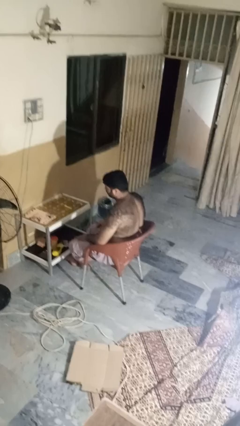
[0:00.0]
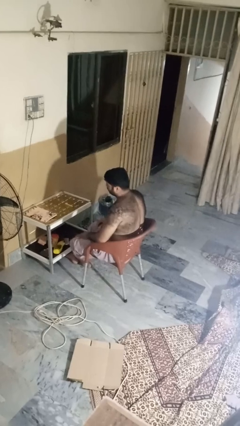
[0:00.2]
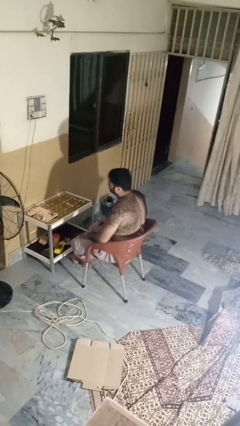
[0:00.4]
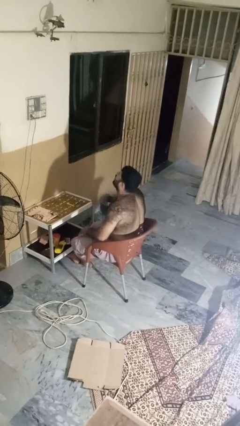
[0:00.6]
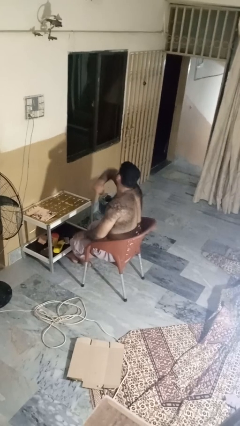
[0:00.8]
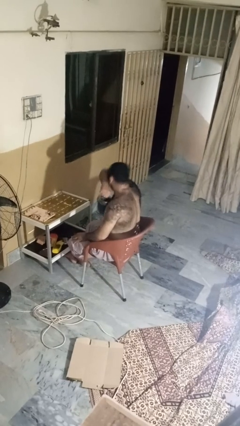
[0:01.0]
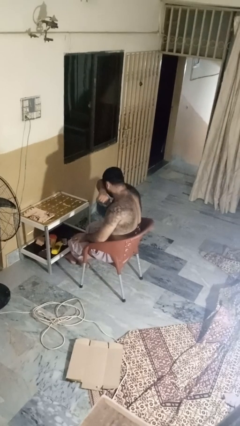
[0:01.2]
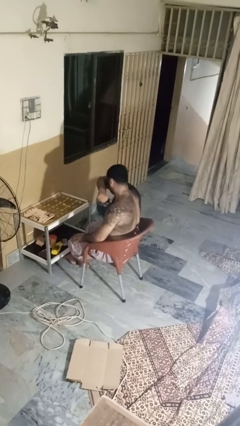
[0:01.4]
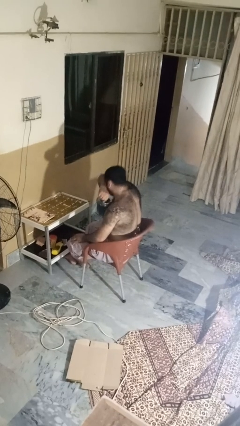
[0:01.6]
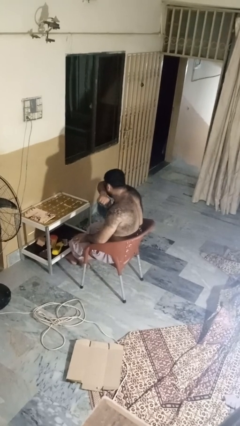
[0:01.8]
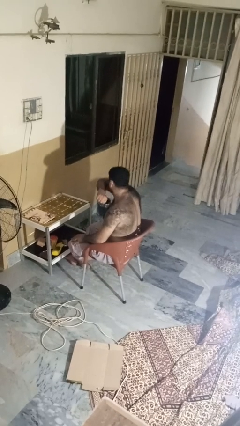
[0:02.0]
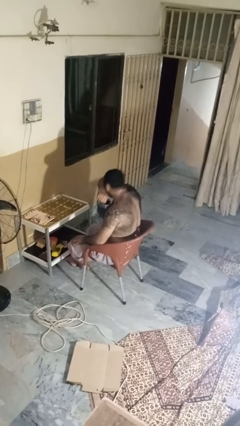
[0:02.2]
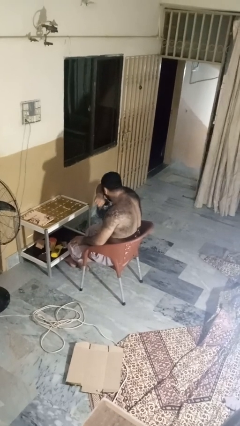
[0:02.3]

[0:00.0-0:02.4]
person sneezes into arm

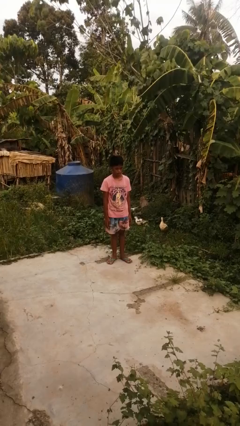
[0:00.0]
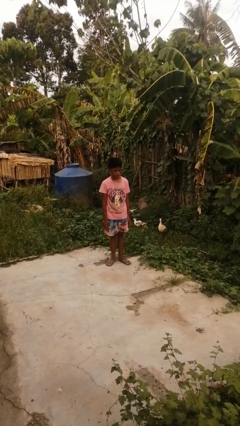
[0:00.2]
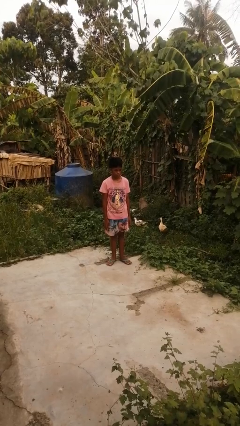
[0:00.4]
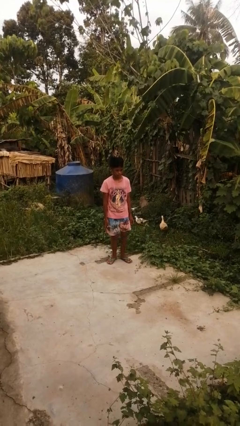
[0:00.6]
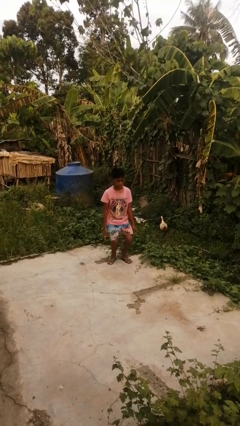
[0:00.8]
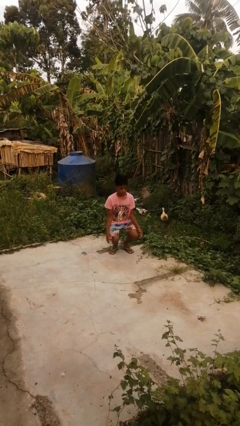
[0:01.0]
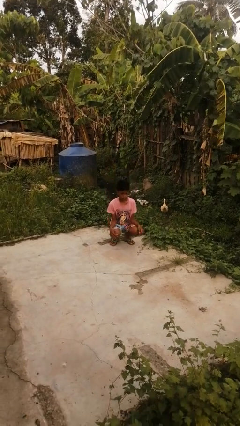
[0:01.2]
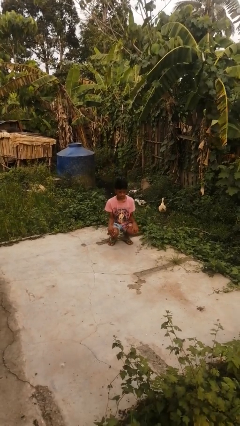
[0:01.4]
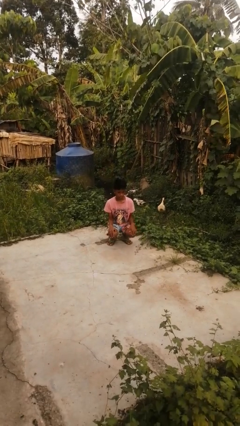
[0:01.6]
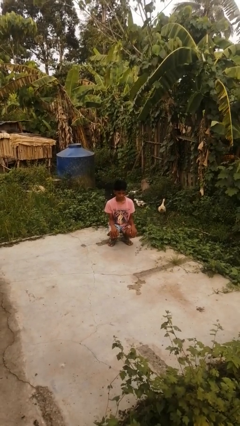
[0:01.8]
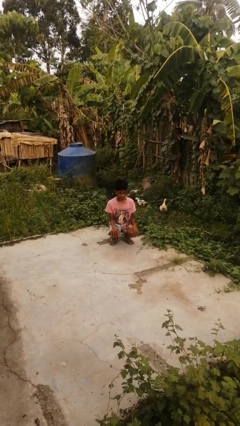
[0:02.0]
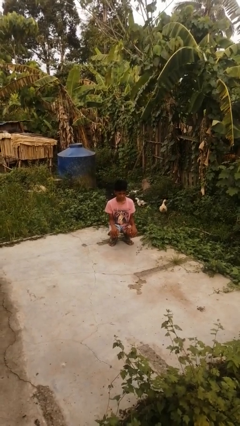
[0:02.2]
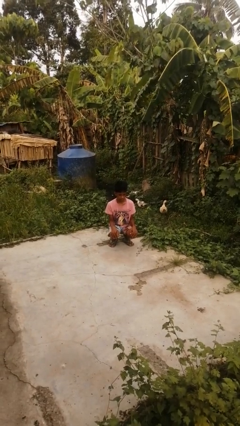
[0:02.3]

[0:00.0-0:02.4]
person squats

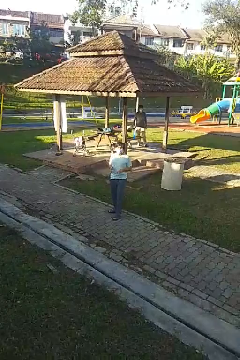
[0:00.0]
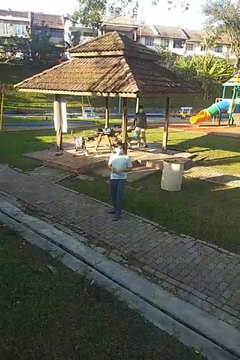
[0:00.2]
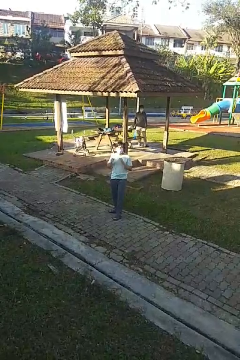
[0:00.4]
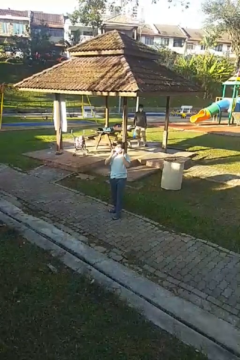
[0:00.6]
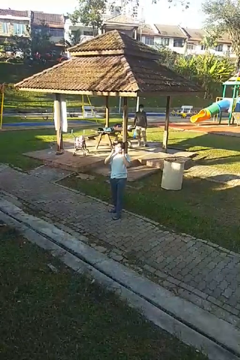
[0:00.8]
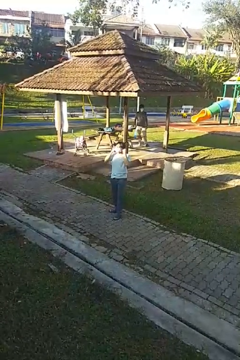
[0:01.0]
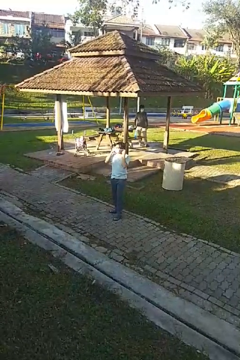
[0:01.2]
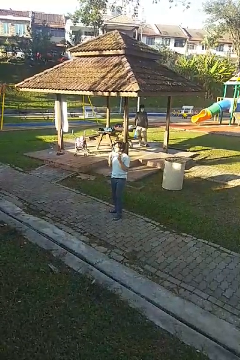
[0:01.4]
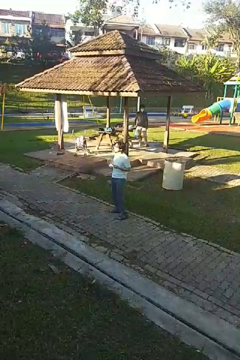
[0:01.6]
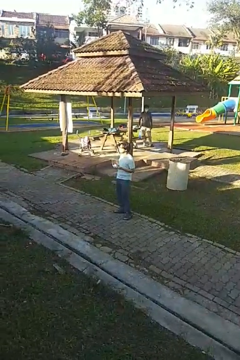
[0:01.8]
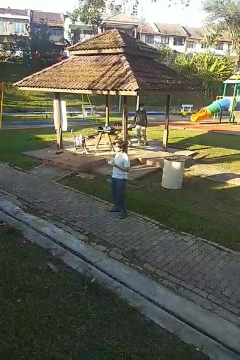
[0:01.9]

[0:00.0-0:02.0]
person takes off facemask

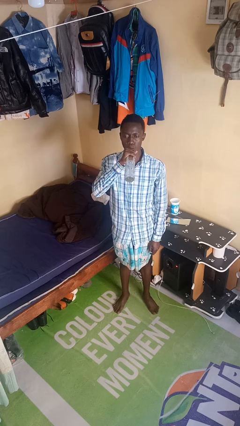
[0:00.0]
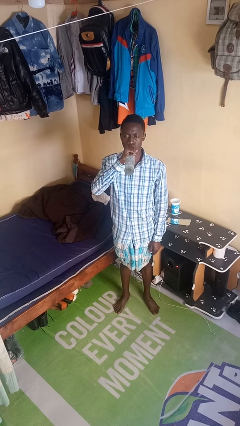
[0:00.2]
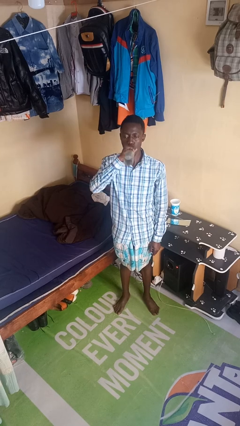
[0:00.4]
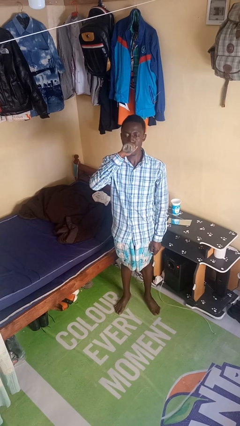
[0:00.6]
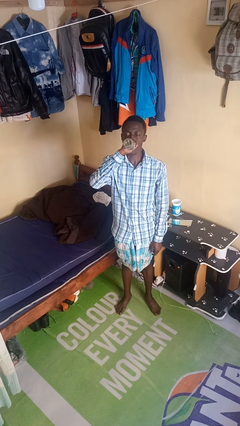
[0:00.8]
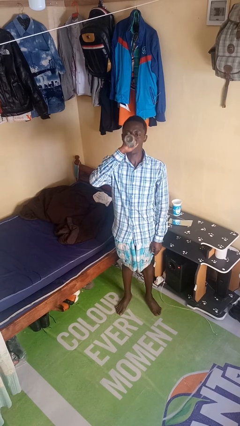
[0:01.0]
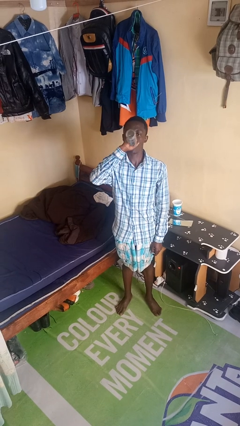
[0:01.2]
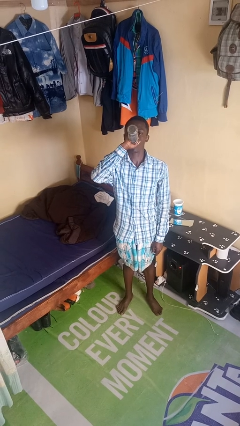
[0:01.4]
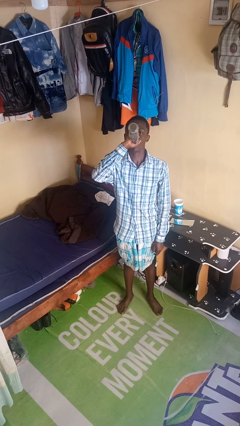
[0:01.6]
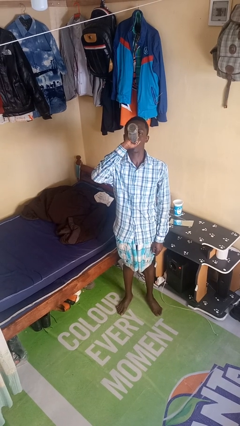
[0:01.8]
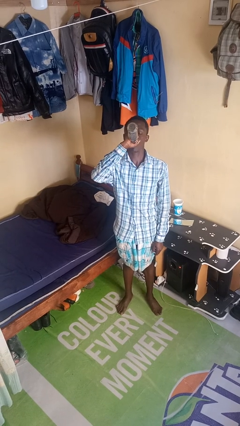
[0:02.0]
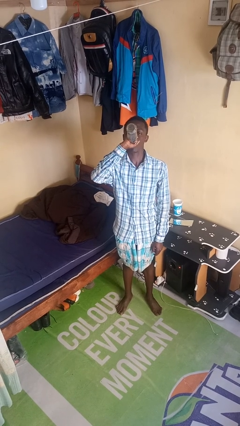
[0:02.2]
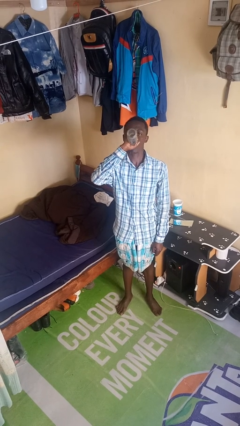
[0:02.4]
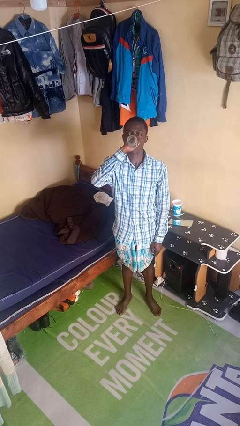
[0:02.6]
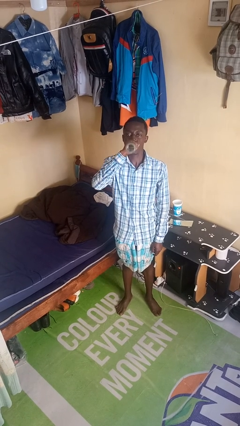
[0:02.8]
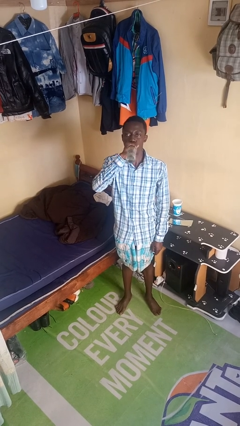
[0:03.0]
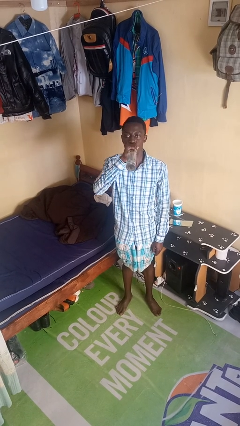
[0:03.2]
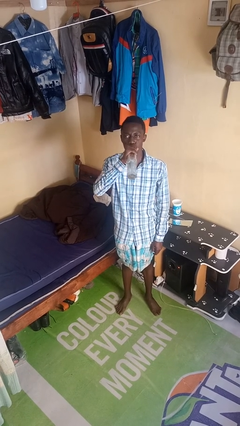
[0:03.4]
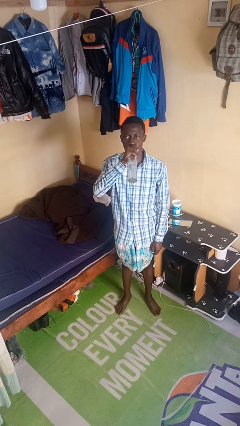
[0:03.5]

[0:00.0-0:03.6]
person drinks from bottle

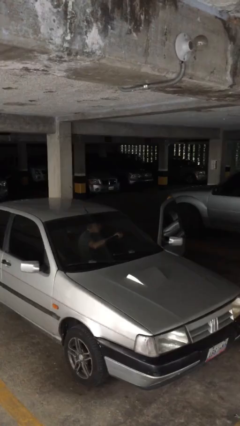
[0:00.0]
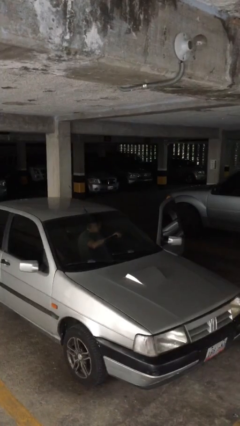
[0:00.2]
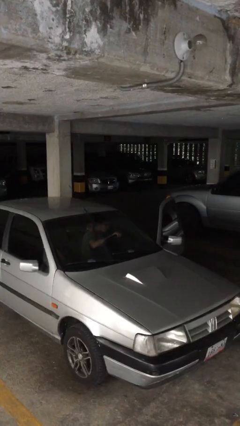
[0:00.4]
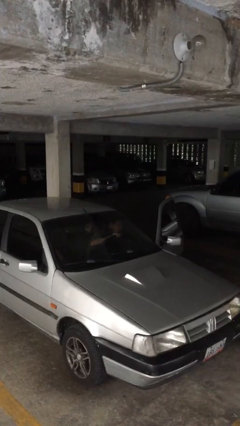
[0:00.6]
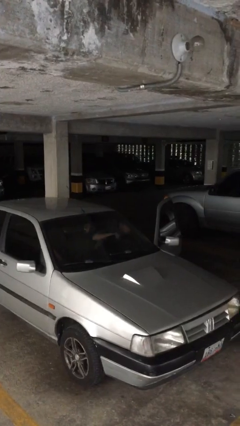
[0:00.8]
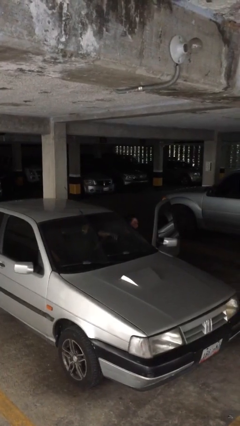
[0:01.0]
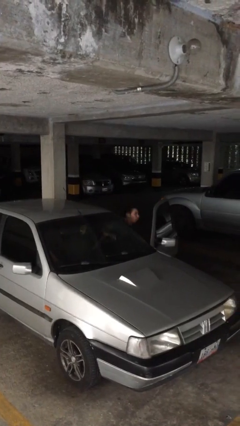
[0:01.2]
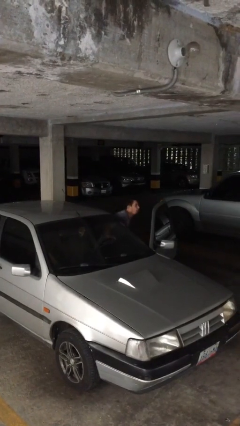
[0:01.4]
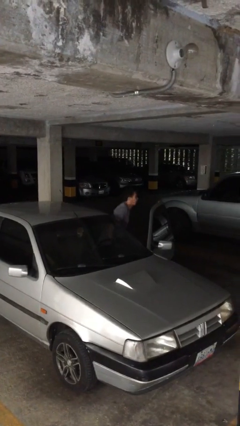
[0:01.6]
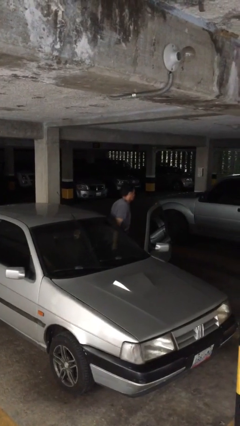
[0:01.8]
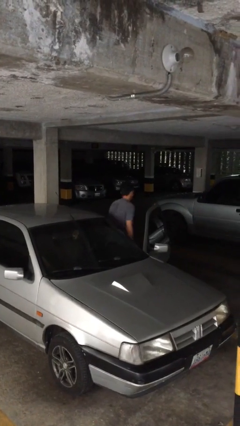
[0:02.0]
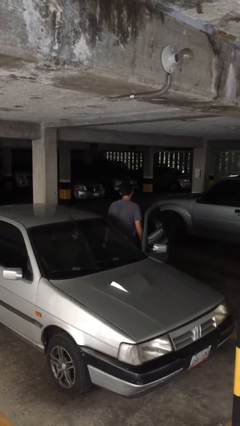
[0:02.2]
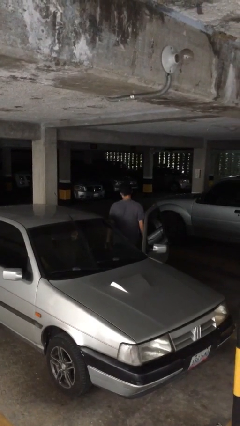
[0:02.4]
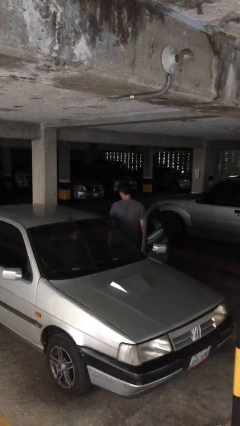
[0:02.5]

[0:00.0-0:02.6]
person exits car

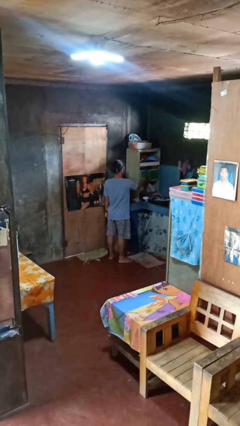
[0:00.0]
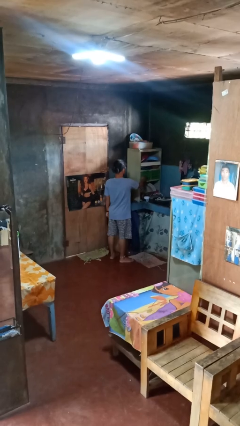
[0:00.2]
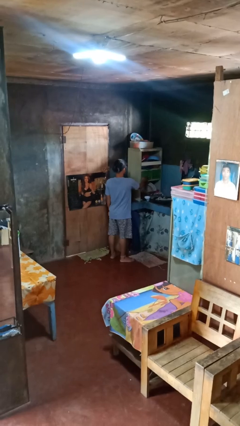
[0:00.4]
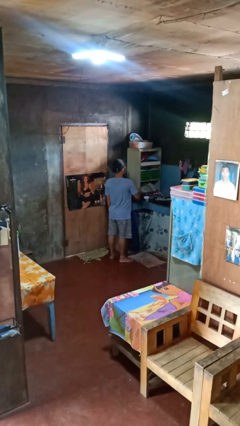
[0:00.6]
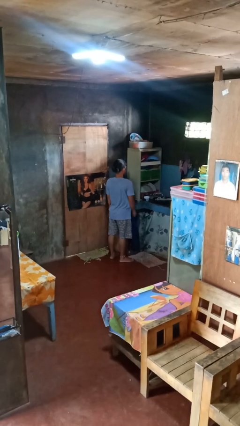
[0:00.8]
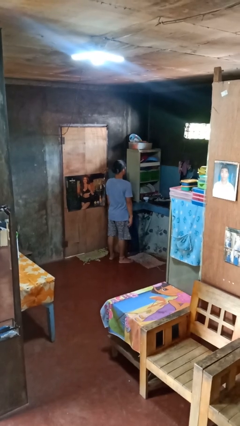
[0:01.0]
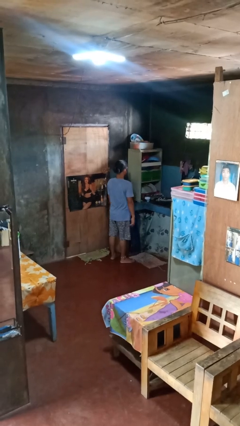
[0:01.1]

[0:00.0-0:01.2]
person closes kitchen drawer

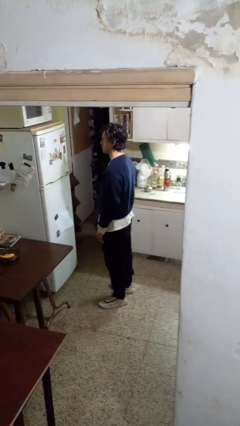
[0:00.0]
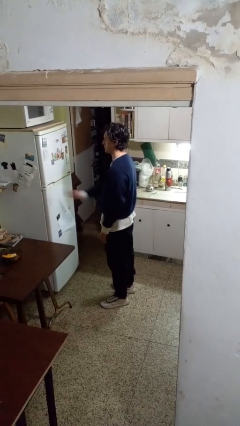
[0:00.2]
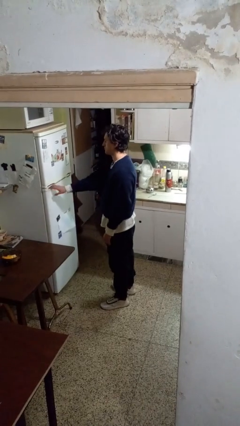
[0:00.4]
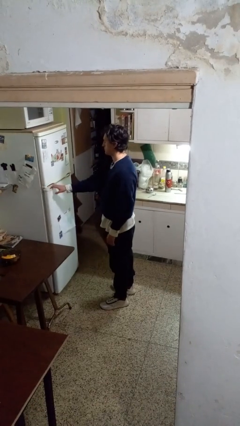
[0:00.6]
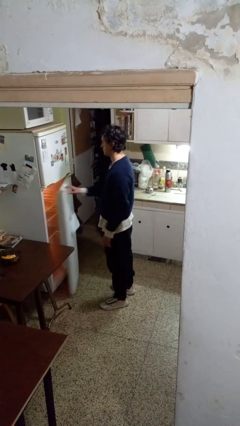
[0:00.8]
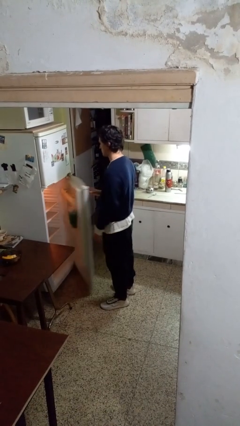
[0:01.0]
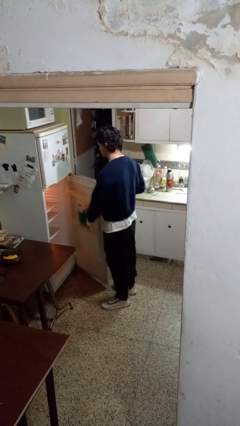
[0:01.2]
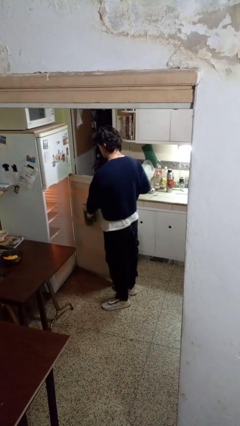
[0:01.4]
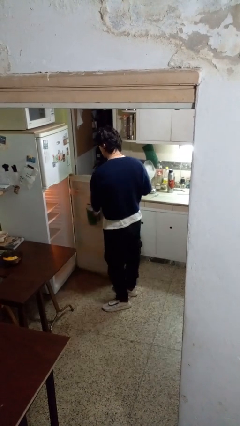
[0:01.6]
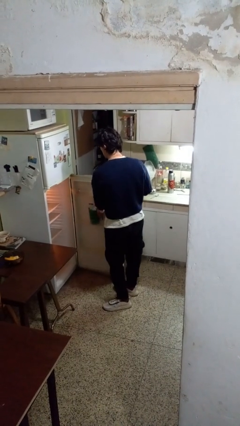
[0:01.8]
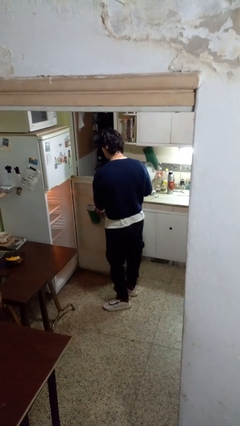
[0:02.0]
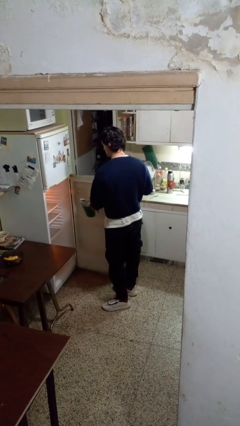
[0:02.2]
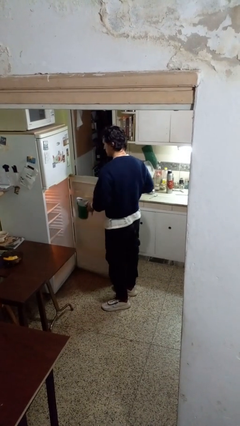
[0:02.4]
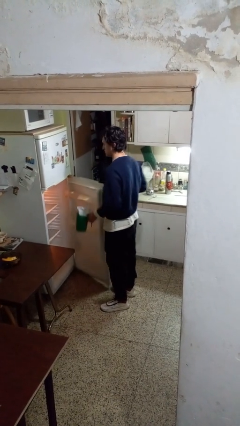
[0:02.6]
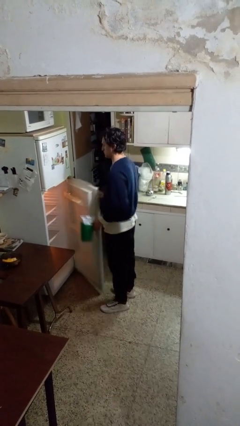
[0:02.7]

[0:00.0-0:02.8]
person takes object from refrigerator
